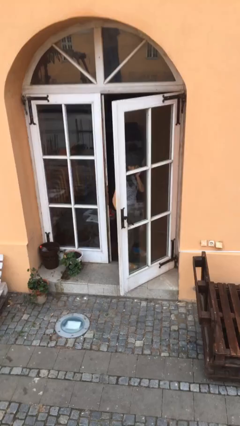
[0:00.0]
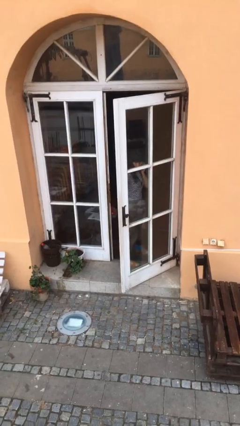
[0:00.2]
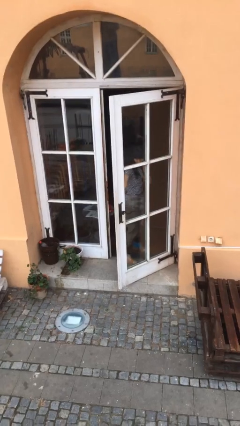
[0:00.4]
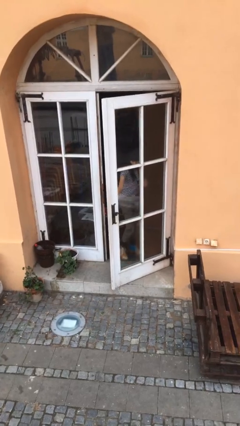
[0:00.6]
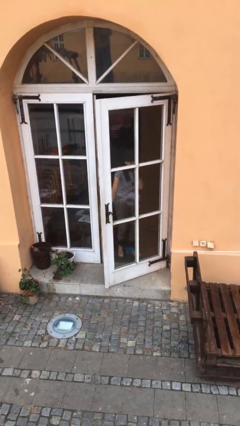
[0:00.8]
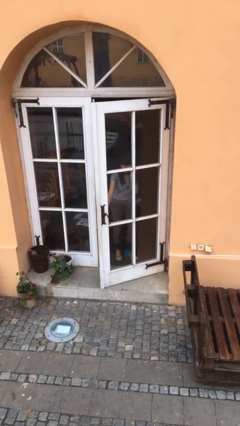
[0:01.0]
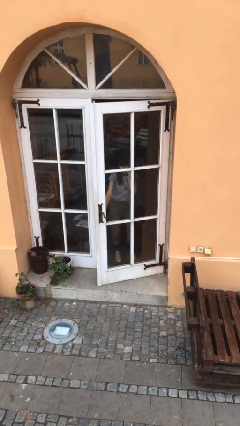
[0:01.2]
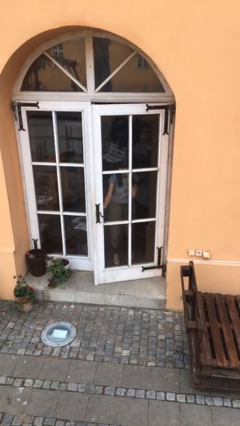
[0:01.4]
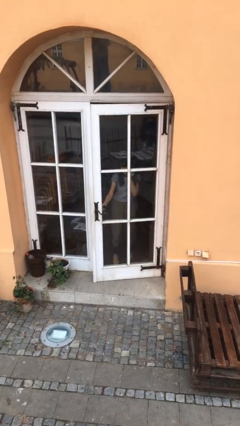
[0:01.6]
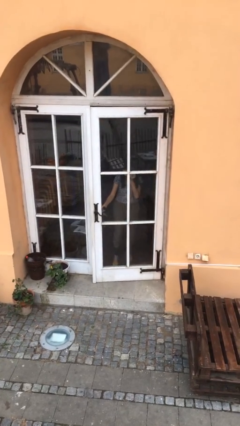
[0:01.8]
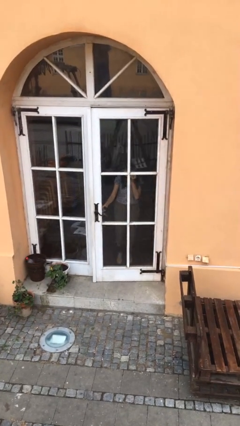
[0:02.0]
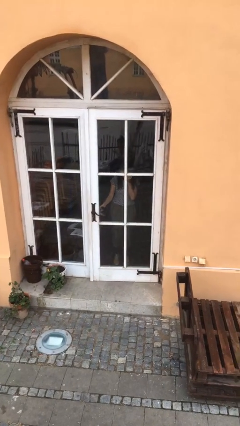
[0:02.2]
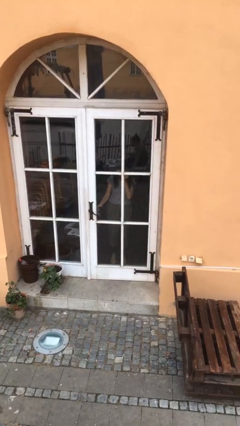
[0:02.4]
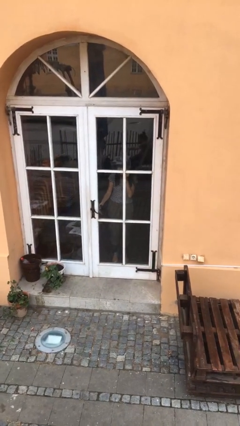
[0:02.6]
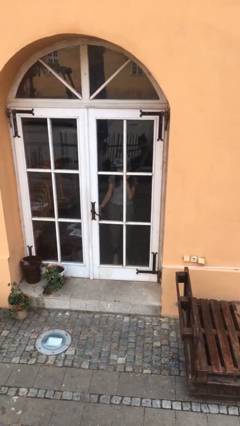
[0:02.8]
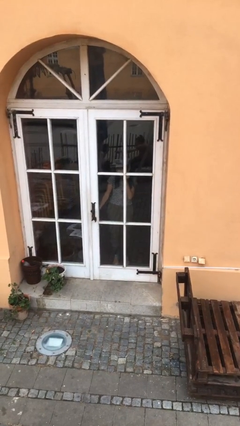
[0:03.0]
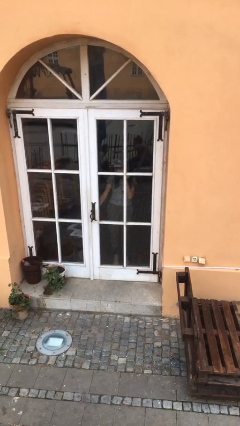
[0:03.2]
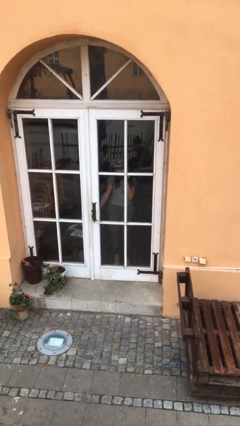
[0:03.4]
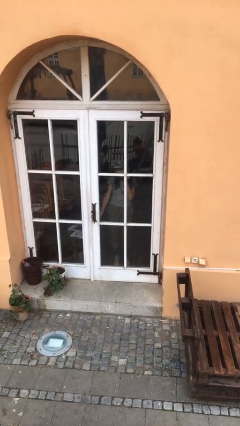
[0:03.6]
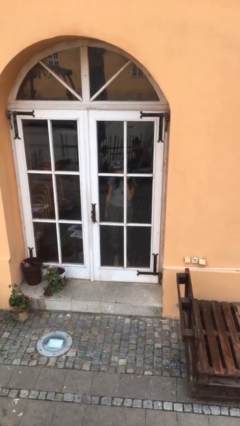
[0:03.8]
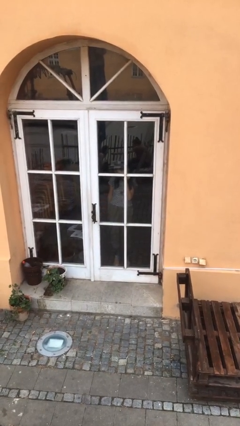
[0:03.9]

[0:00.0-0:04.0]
person closes facility door

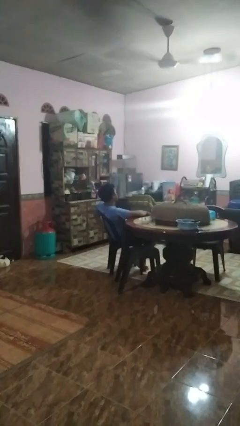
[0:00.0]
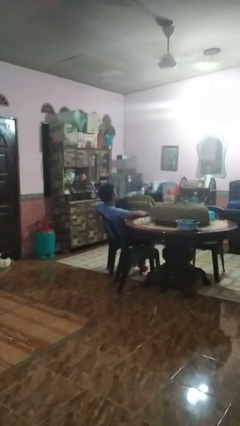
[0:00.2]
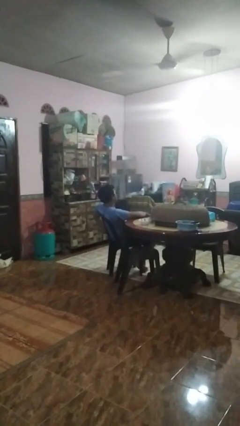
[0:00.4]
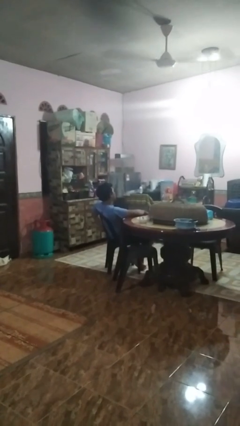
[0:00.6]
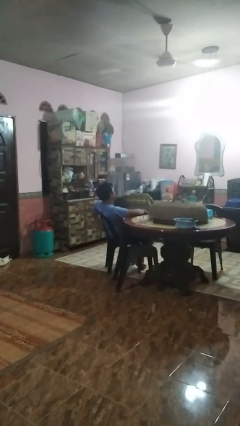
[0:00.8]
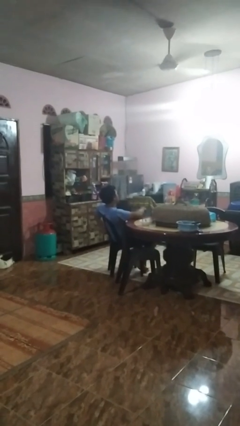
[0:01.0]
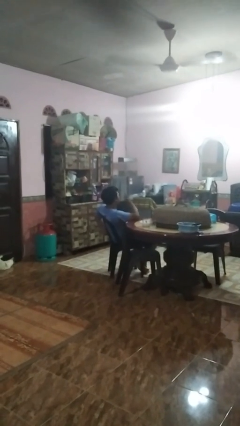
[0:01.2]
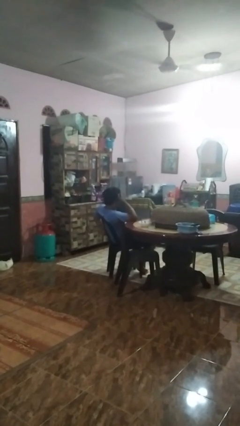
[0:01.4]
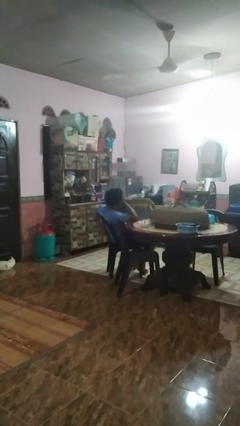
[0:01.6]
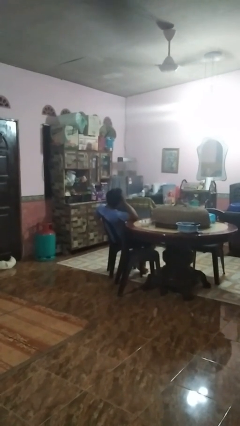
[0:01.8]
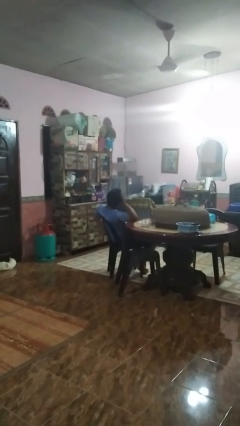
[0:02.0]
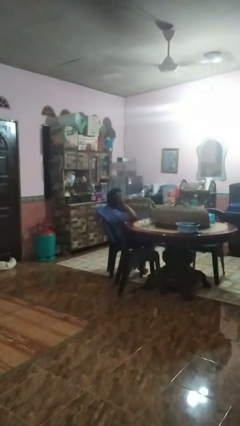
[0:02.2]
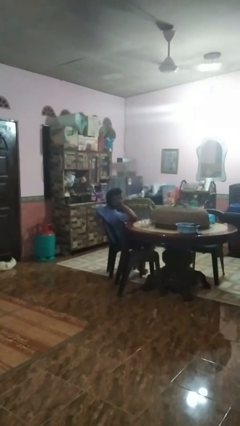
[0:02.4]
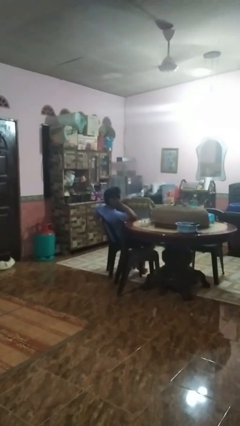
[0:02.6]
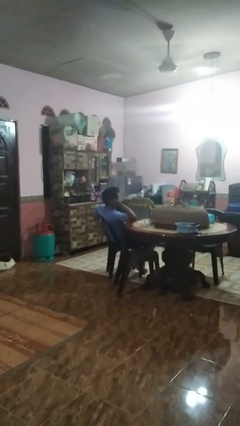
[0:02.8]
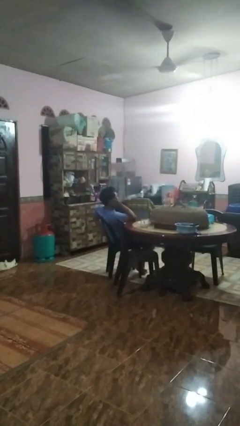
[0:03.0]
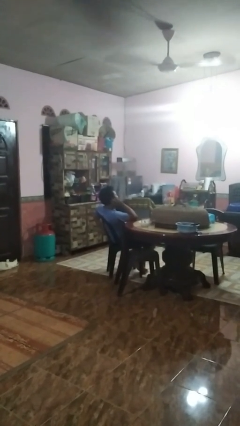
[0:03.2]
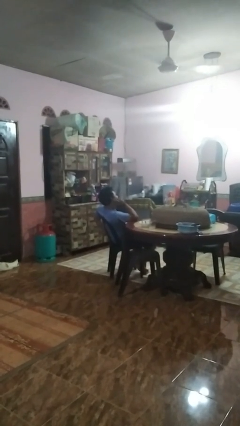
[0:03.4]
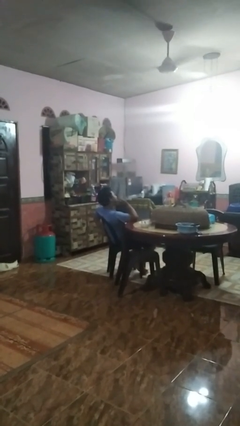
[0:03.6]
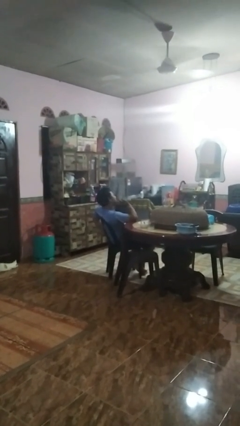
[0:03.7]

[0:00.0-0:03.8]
person strokes hair

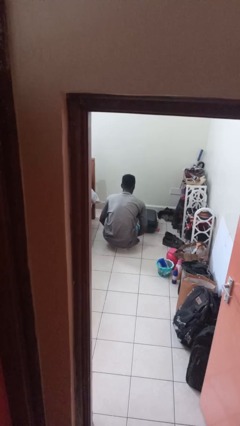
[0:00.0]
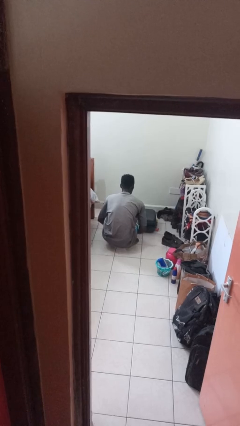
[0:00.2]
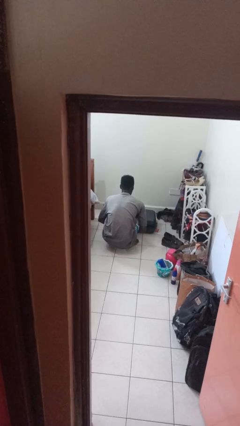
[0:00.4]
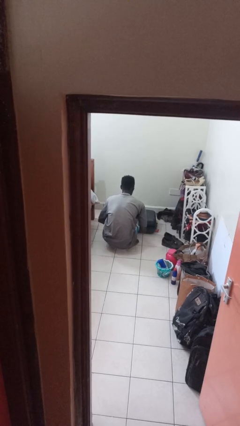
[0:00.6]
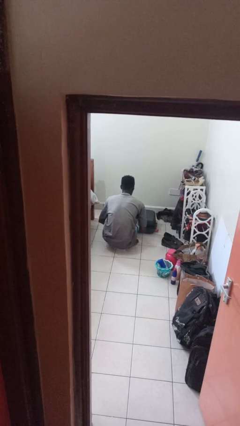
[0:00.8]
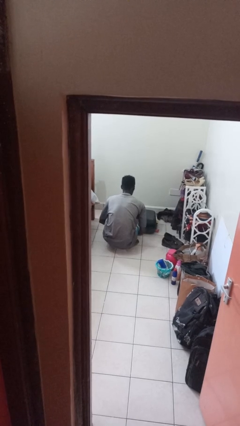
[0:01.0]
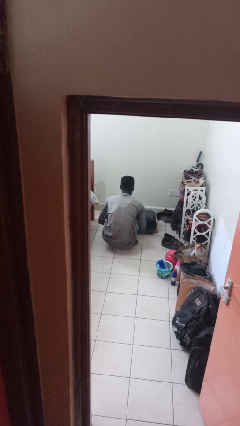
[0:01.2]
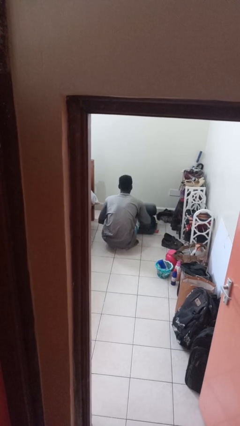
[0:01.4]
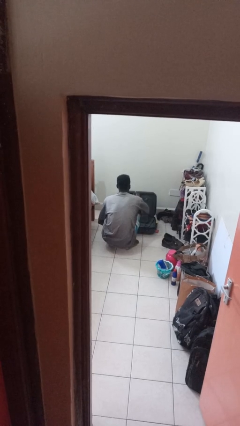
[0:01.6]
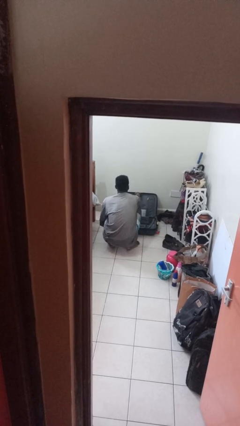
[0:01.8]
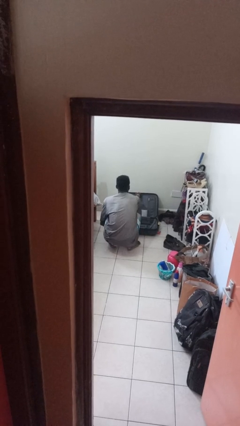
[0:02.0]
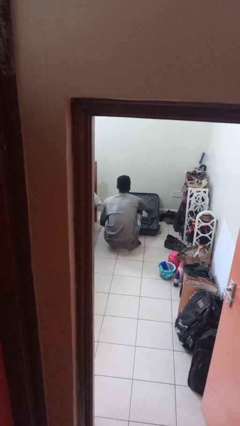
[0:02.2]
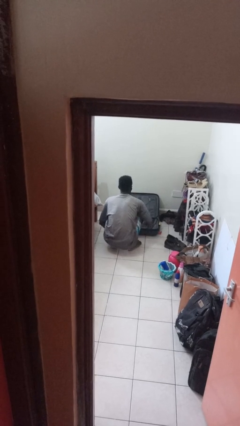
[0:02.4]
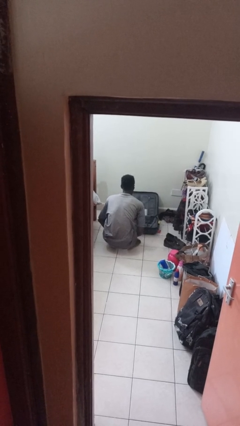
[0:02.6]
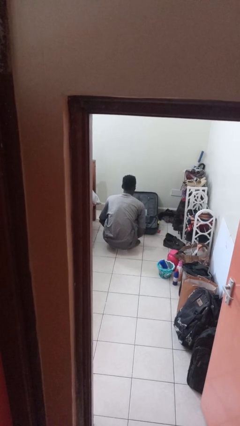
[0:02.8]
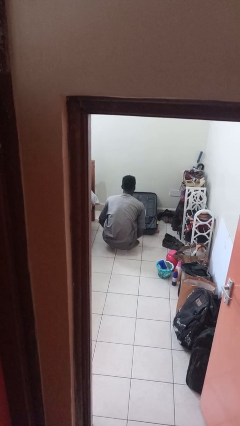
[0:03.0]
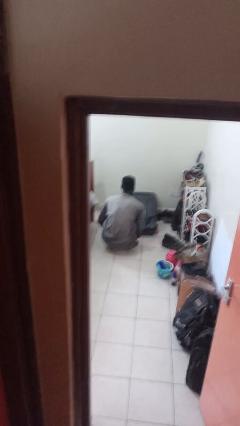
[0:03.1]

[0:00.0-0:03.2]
person opens suitcase

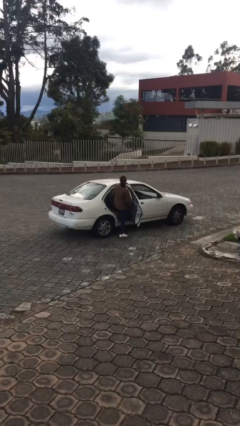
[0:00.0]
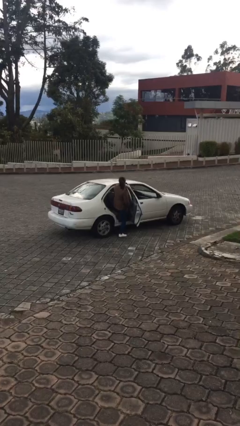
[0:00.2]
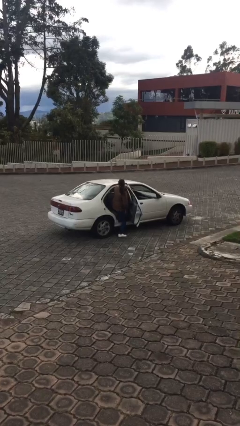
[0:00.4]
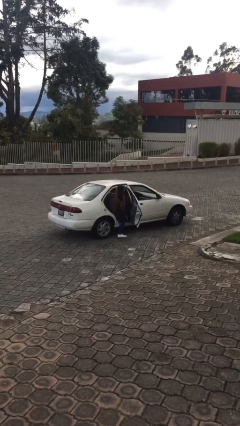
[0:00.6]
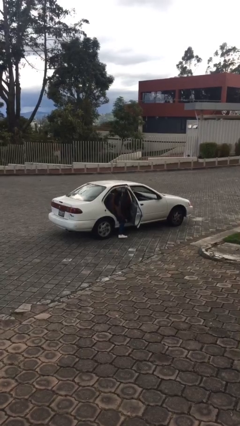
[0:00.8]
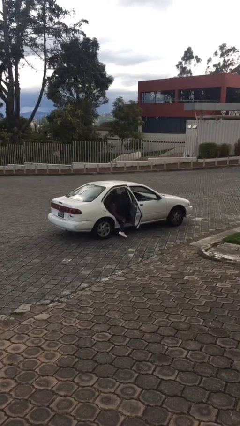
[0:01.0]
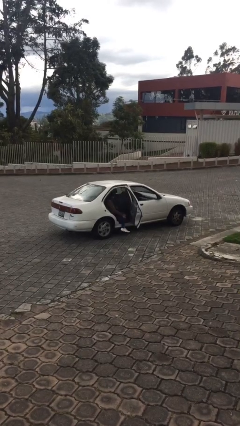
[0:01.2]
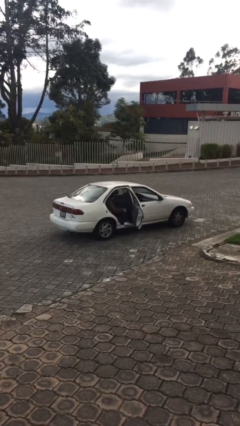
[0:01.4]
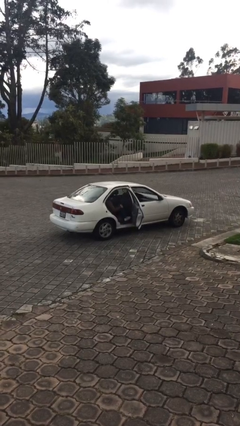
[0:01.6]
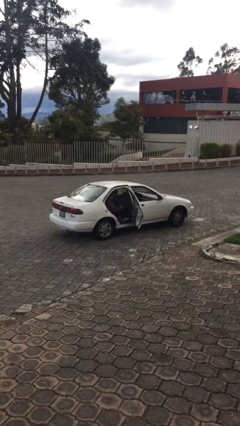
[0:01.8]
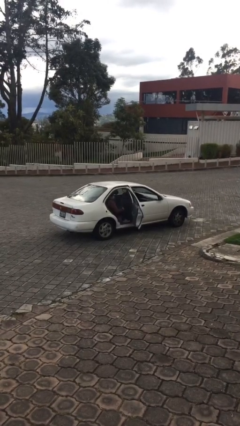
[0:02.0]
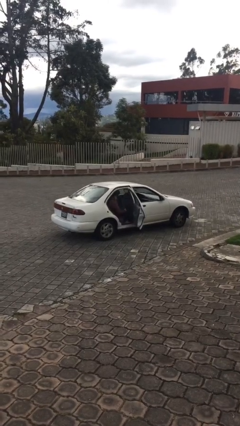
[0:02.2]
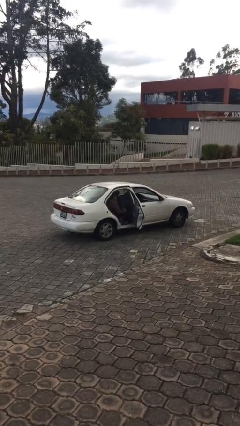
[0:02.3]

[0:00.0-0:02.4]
person enters car

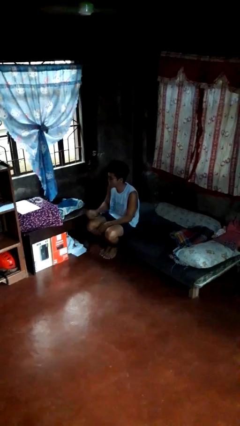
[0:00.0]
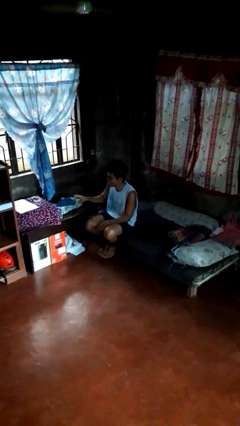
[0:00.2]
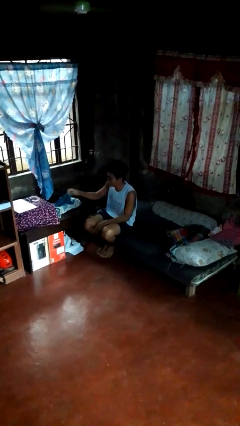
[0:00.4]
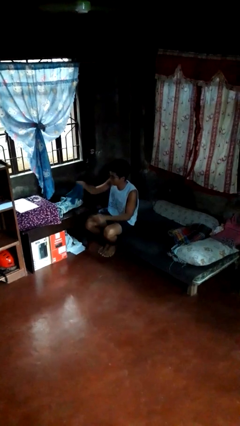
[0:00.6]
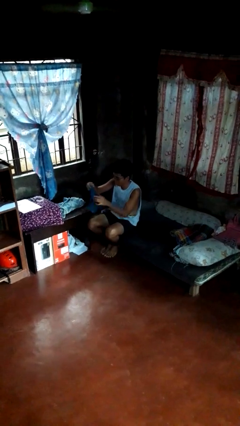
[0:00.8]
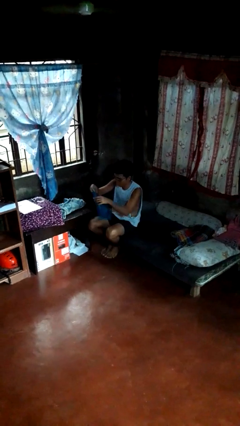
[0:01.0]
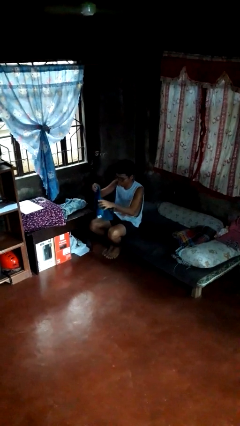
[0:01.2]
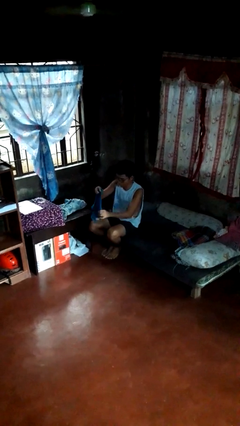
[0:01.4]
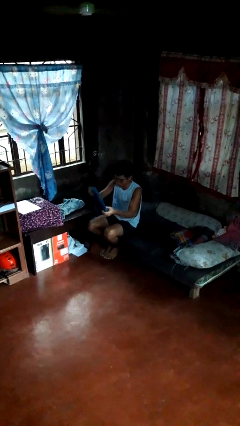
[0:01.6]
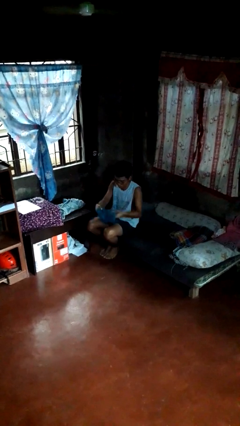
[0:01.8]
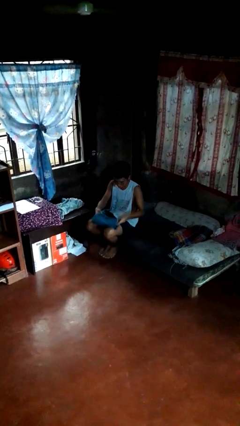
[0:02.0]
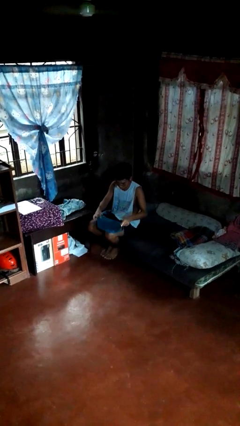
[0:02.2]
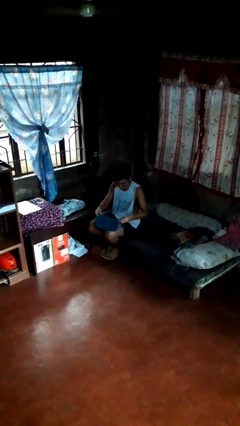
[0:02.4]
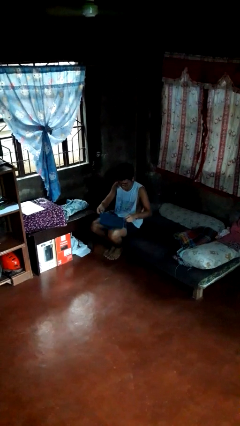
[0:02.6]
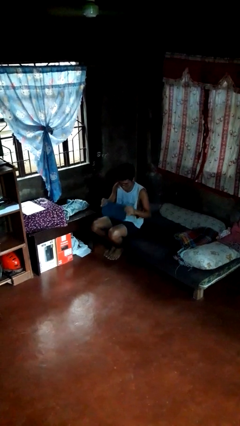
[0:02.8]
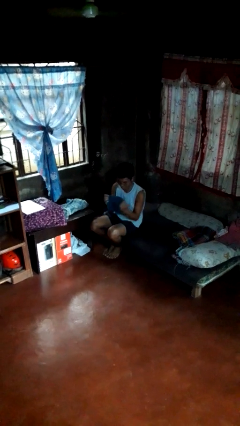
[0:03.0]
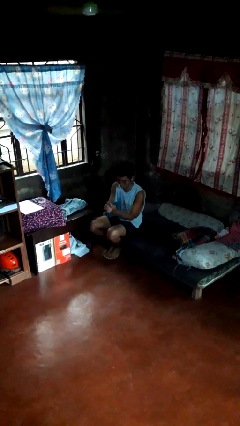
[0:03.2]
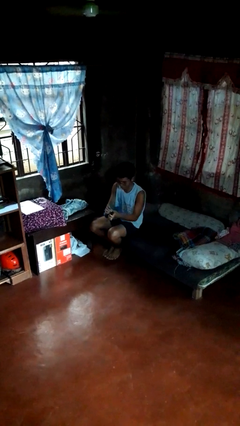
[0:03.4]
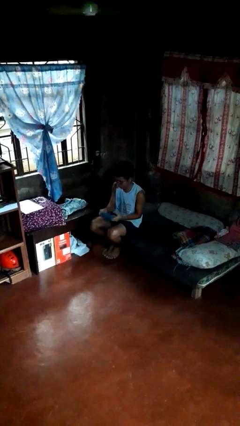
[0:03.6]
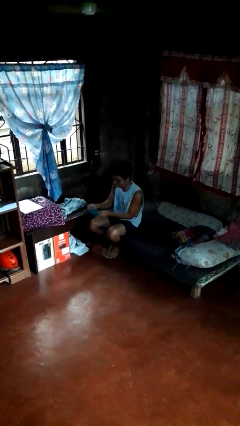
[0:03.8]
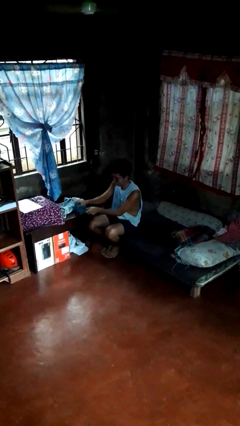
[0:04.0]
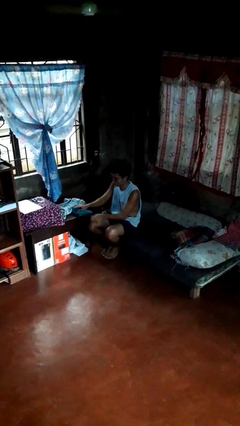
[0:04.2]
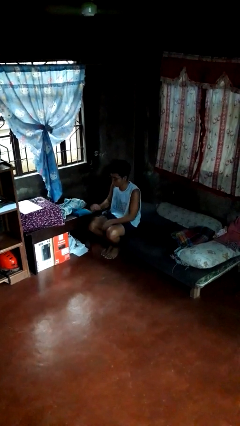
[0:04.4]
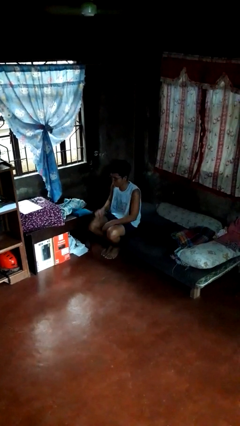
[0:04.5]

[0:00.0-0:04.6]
person folds towel
